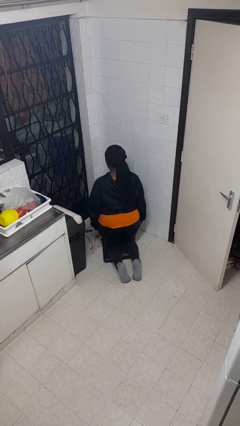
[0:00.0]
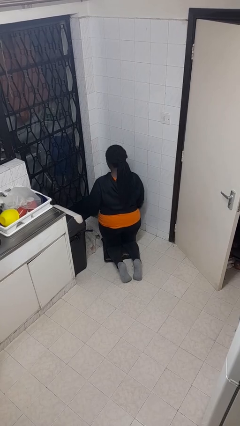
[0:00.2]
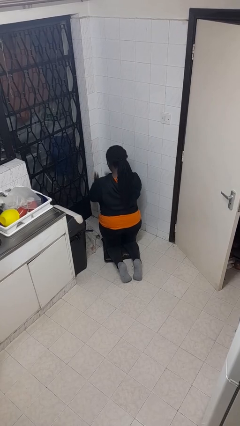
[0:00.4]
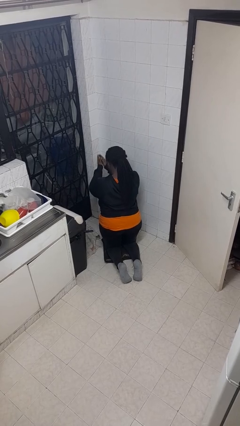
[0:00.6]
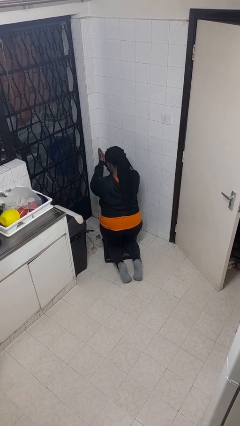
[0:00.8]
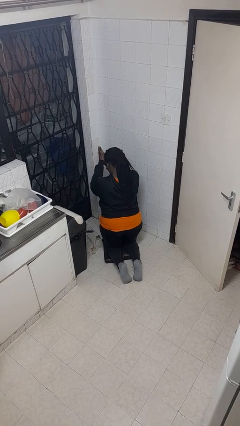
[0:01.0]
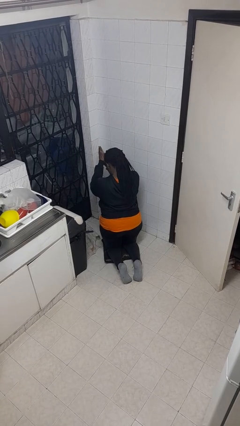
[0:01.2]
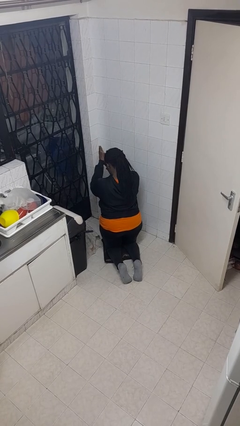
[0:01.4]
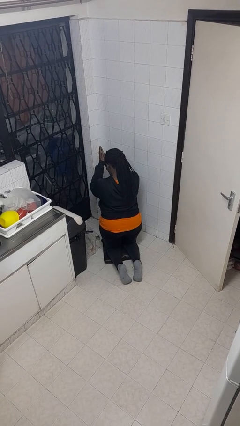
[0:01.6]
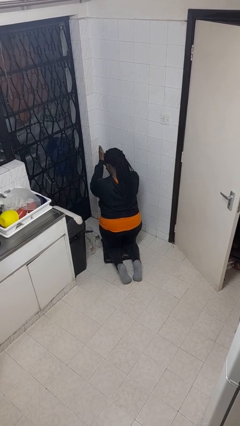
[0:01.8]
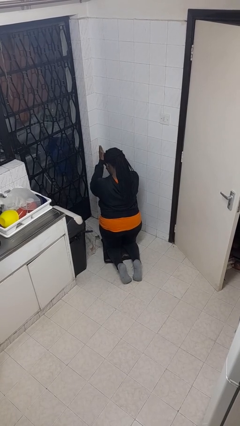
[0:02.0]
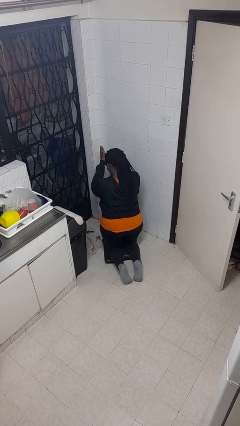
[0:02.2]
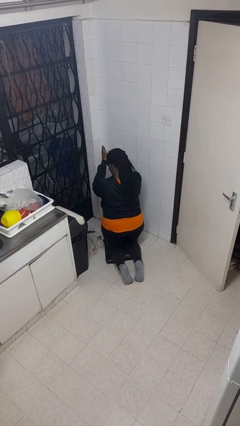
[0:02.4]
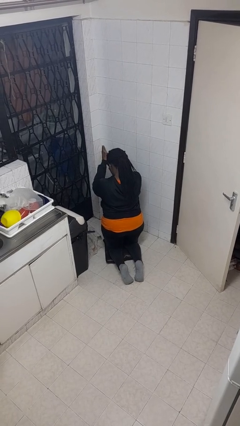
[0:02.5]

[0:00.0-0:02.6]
person prays

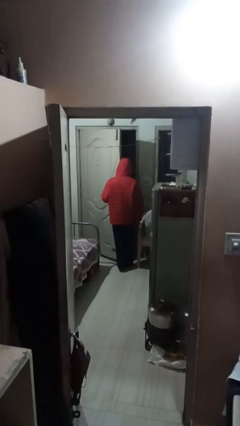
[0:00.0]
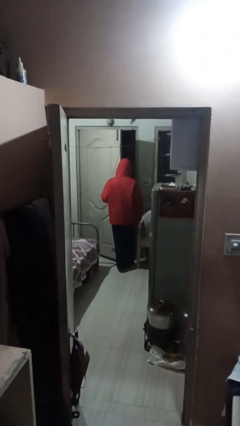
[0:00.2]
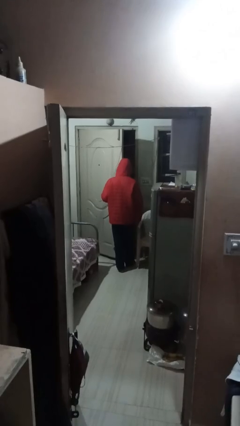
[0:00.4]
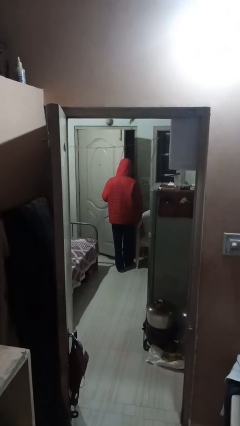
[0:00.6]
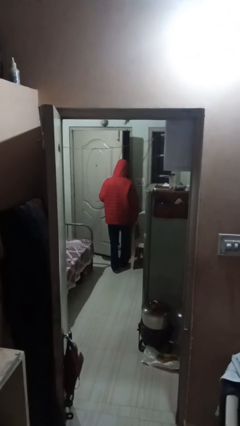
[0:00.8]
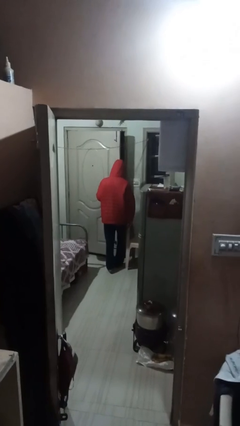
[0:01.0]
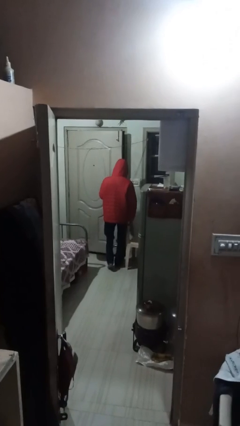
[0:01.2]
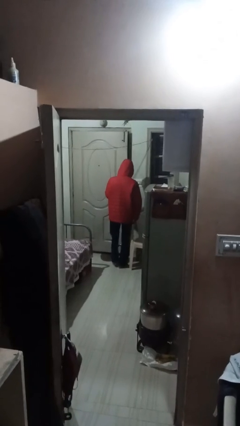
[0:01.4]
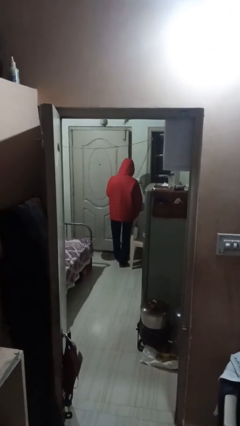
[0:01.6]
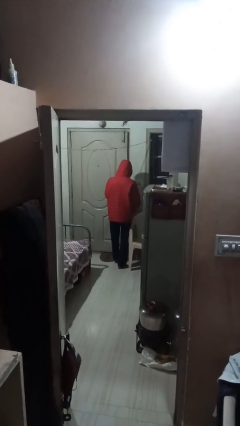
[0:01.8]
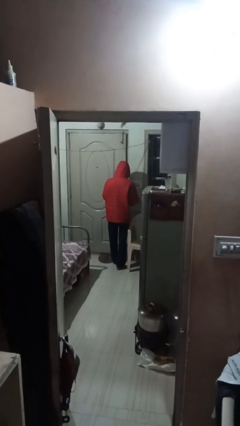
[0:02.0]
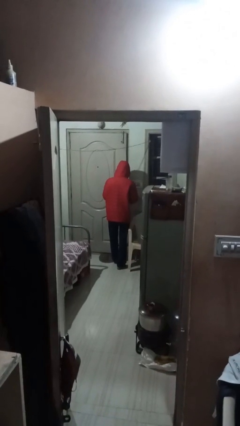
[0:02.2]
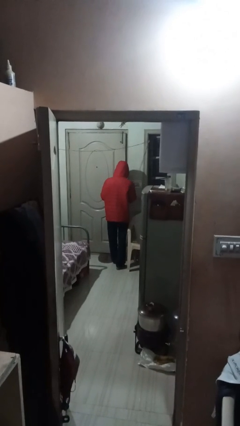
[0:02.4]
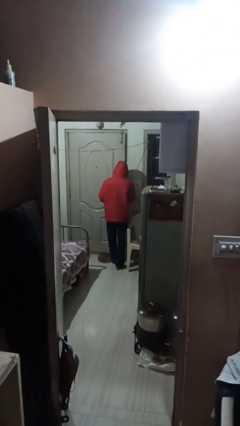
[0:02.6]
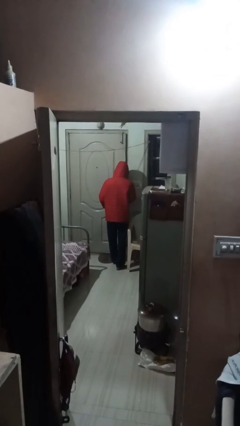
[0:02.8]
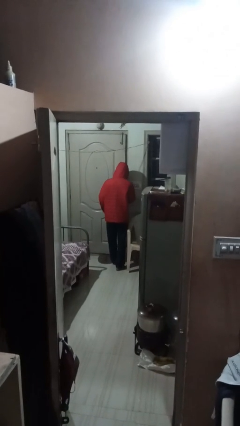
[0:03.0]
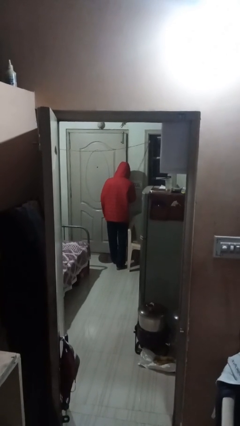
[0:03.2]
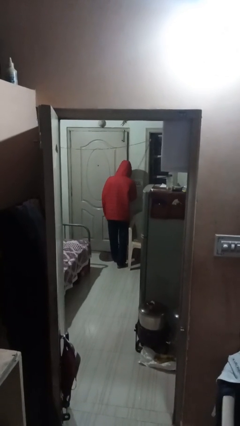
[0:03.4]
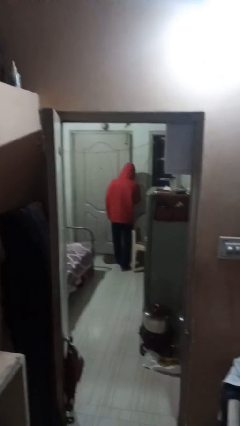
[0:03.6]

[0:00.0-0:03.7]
person closes facility door

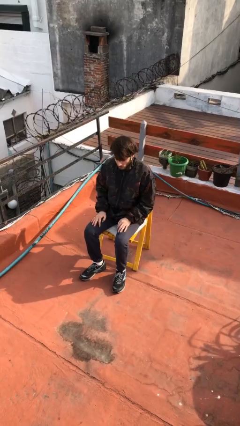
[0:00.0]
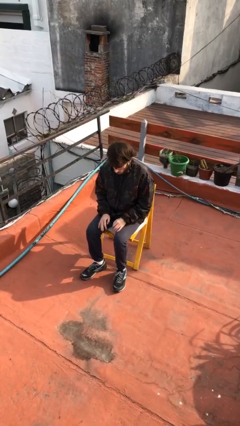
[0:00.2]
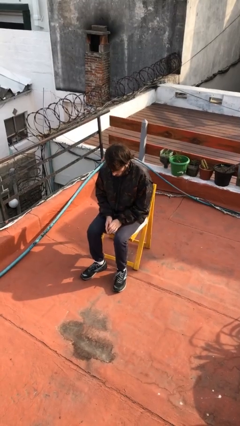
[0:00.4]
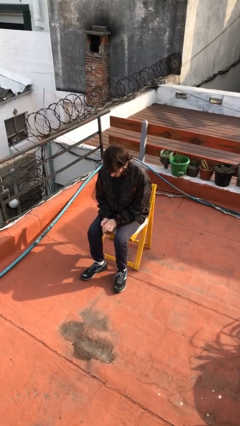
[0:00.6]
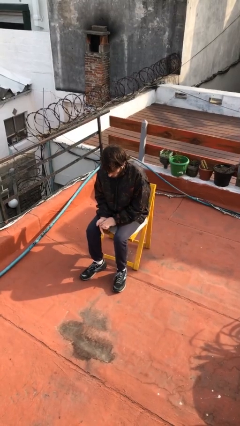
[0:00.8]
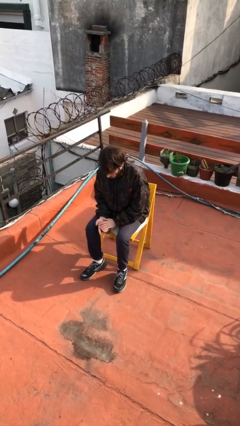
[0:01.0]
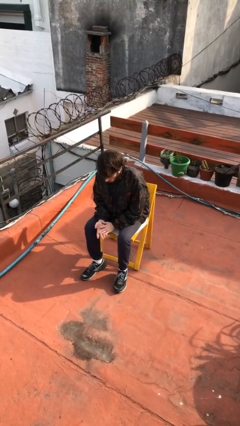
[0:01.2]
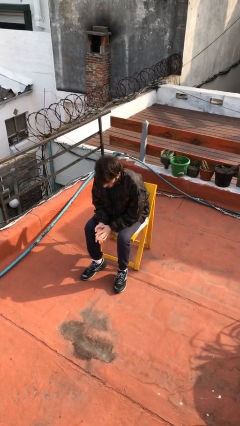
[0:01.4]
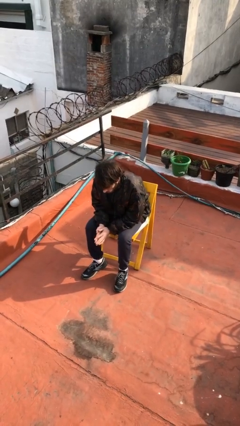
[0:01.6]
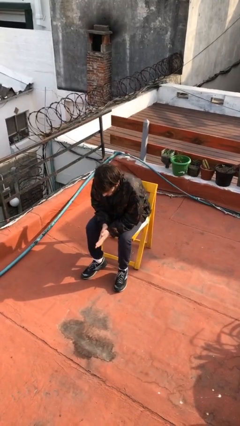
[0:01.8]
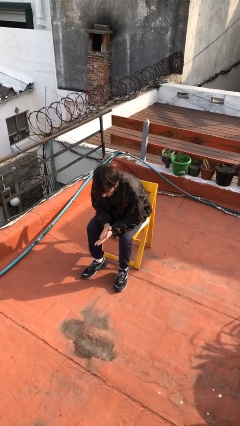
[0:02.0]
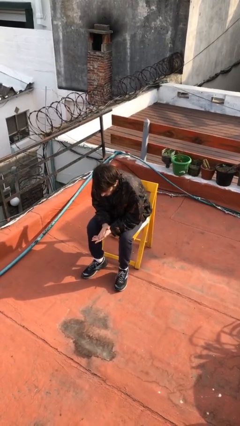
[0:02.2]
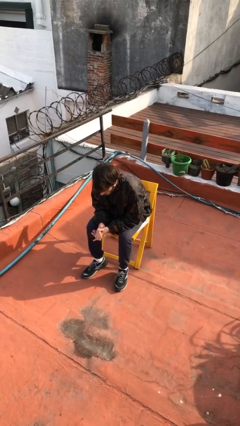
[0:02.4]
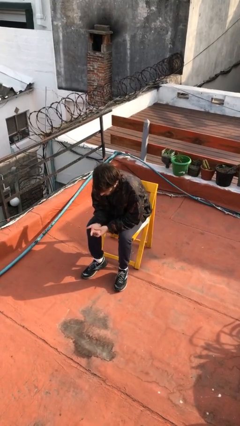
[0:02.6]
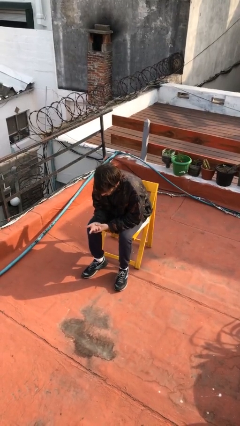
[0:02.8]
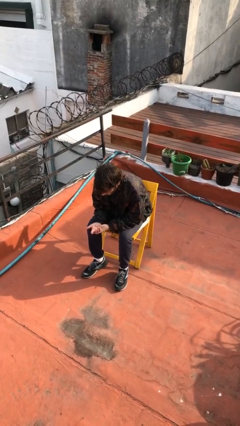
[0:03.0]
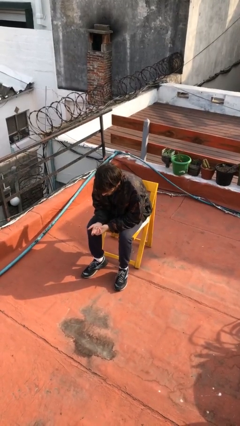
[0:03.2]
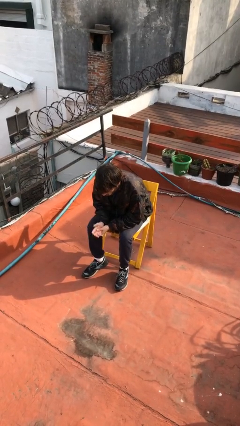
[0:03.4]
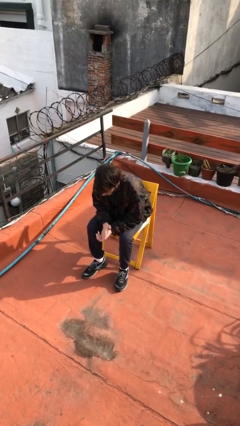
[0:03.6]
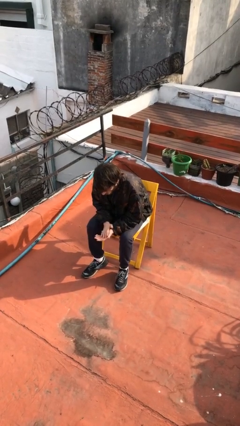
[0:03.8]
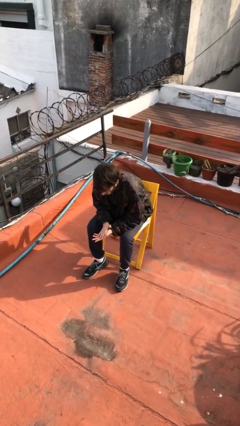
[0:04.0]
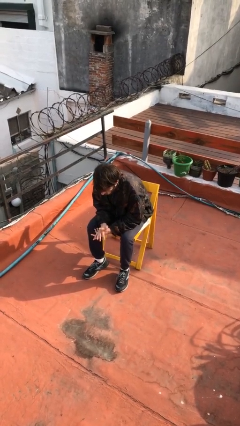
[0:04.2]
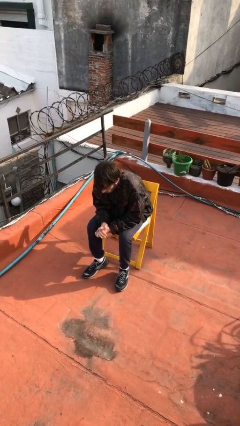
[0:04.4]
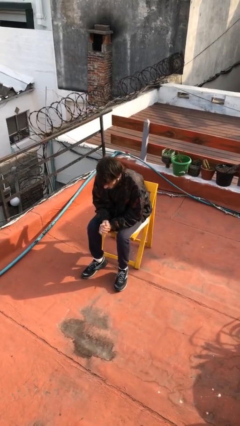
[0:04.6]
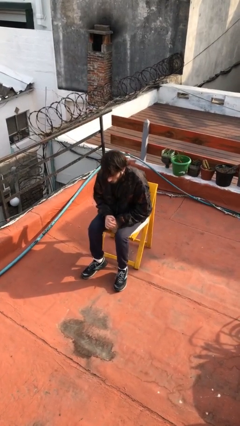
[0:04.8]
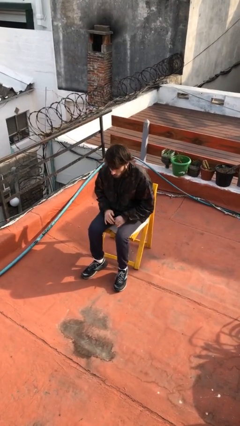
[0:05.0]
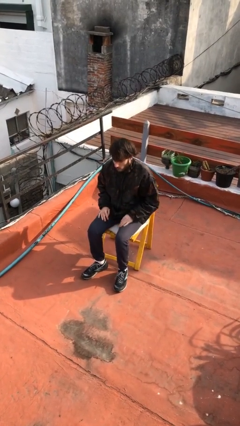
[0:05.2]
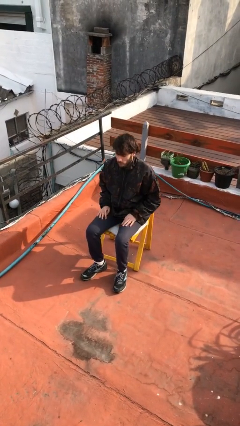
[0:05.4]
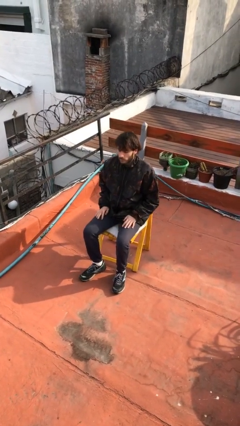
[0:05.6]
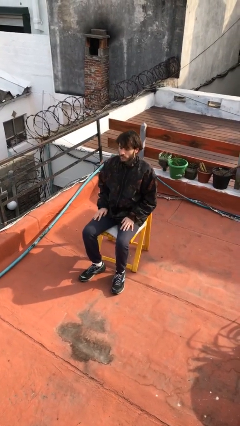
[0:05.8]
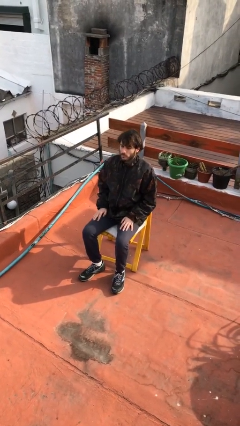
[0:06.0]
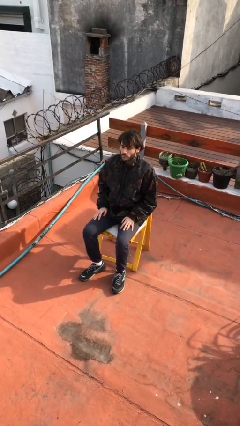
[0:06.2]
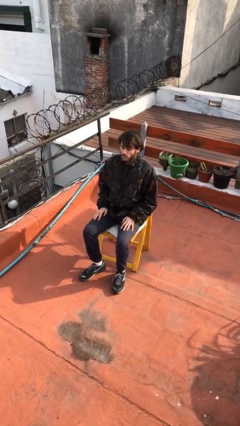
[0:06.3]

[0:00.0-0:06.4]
person looks at hands in lap

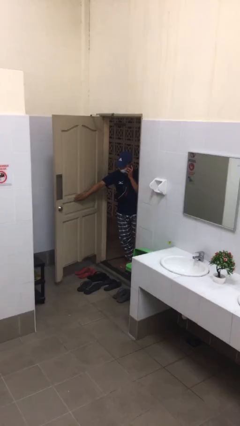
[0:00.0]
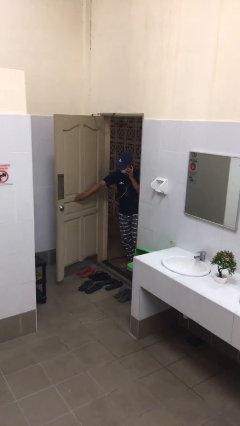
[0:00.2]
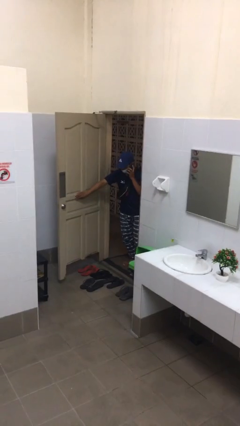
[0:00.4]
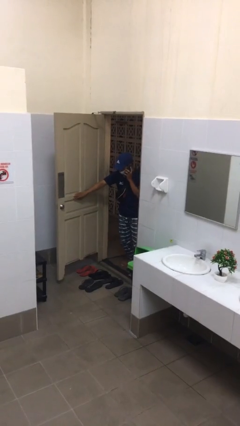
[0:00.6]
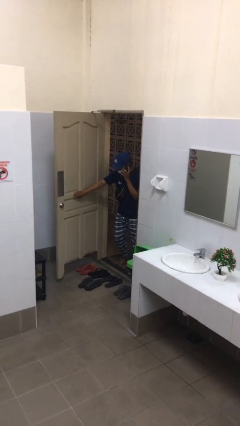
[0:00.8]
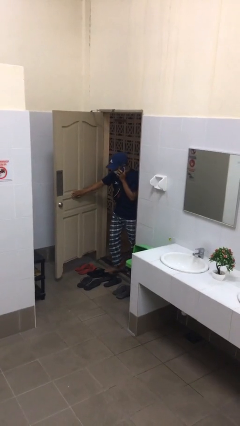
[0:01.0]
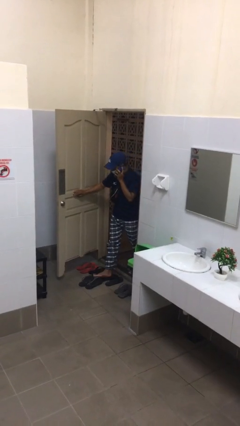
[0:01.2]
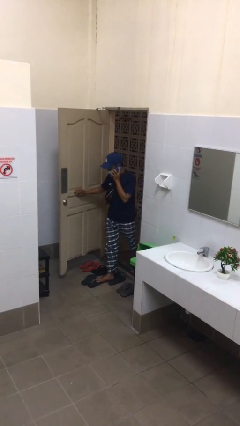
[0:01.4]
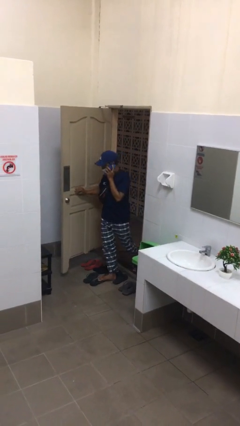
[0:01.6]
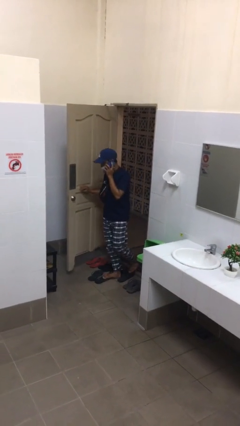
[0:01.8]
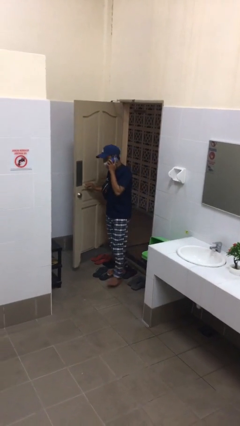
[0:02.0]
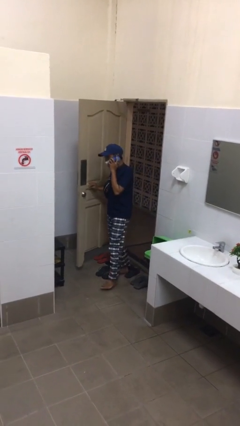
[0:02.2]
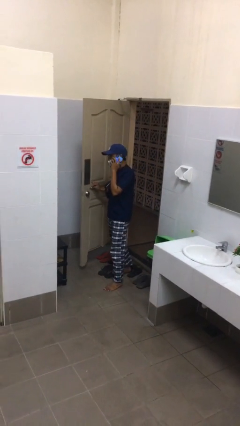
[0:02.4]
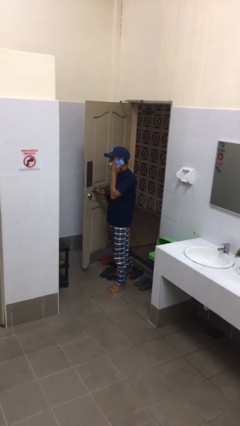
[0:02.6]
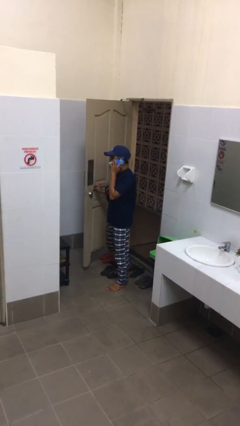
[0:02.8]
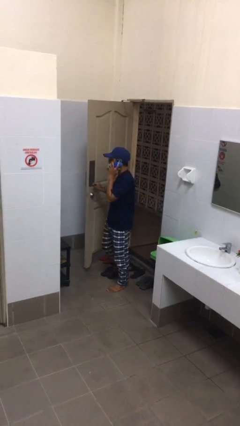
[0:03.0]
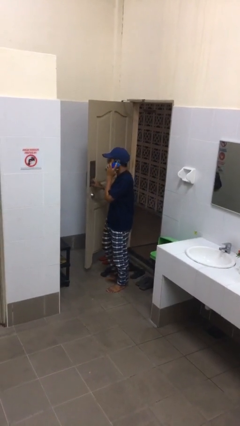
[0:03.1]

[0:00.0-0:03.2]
person enters scene through structure

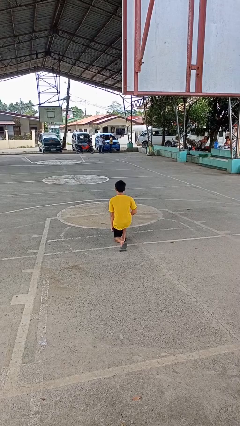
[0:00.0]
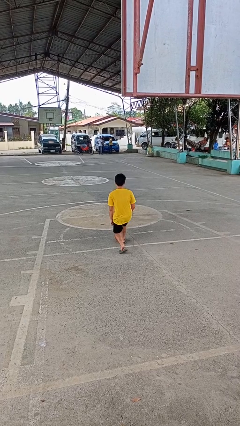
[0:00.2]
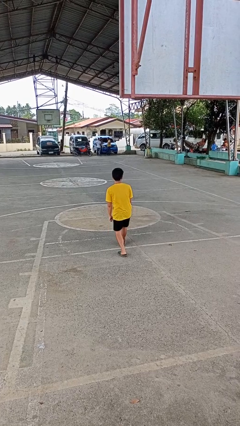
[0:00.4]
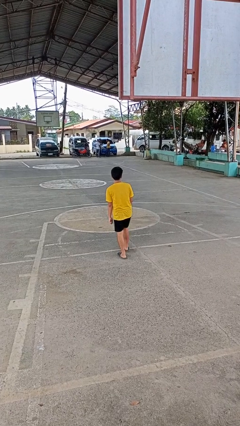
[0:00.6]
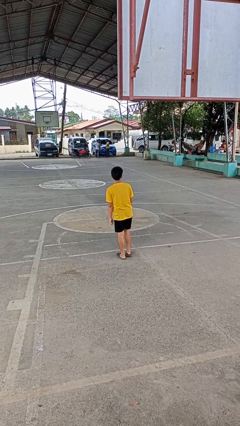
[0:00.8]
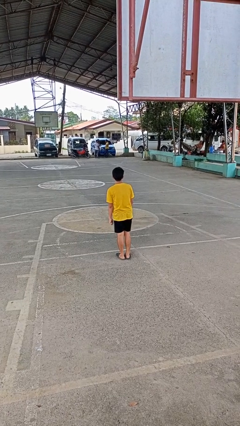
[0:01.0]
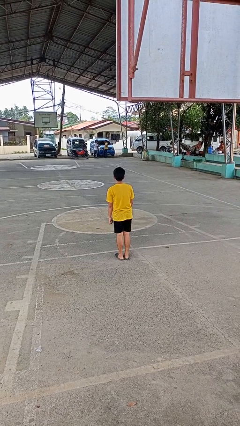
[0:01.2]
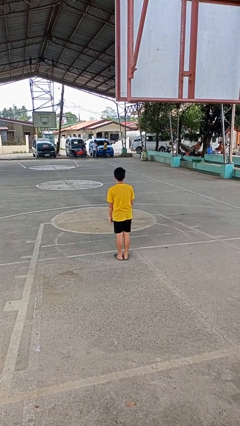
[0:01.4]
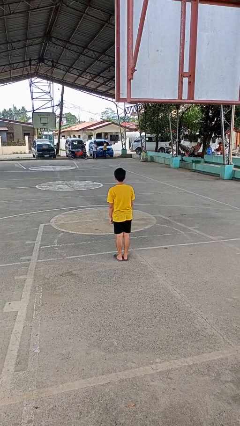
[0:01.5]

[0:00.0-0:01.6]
person stands up from floor

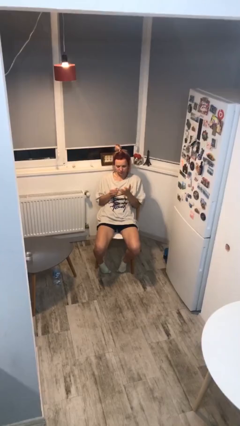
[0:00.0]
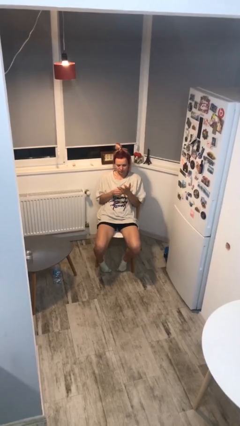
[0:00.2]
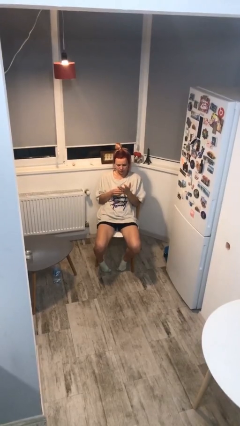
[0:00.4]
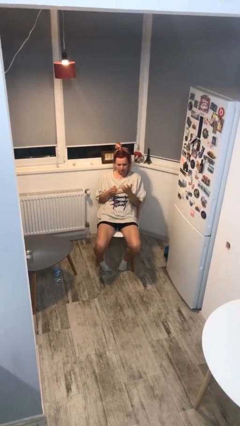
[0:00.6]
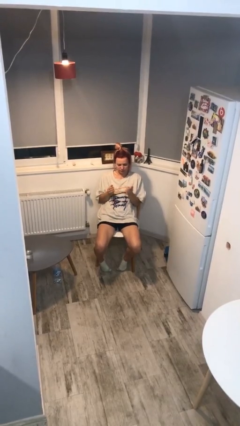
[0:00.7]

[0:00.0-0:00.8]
person puts on ring
